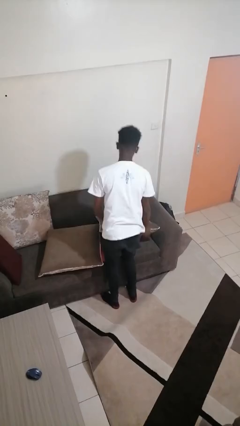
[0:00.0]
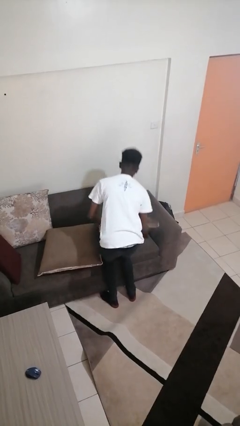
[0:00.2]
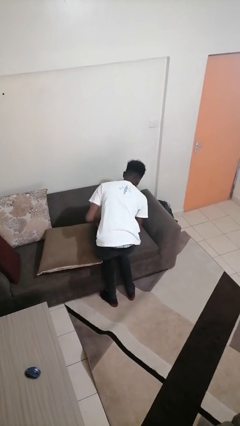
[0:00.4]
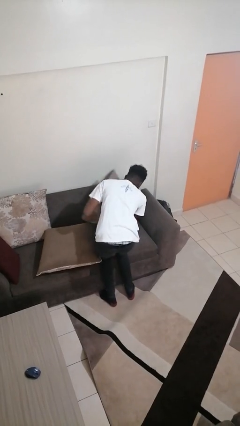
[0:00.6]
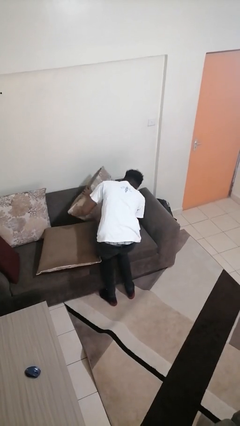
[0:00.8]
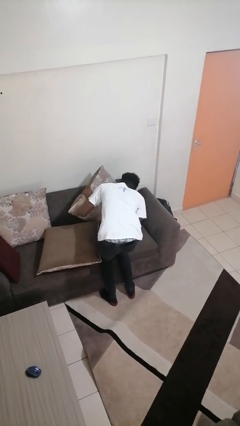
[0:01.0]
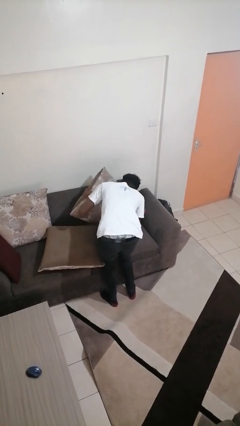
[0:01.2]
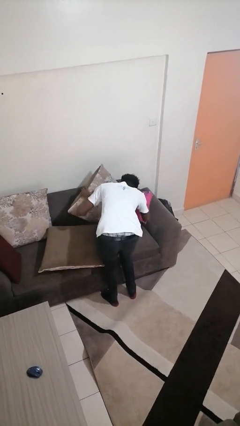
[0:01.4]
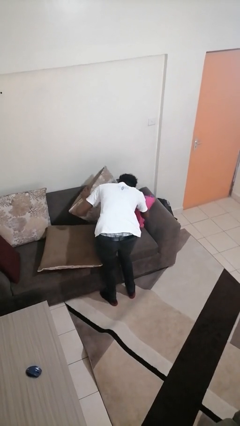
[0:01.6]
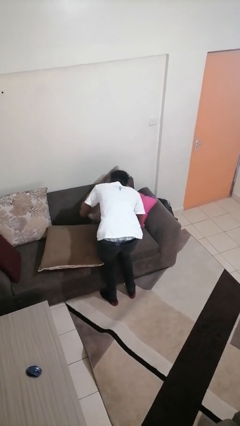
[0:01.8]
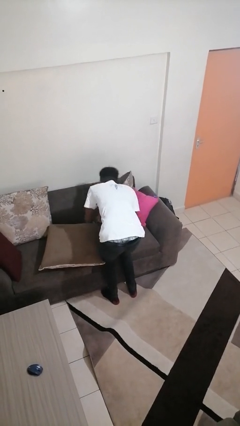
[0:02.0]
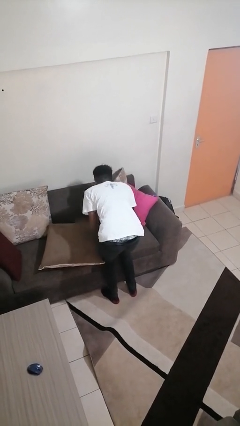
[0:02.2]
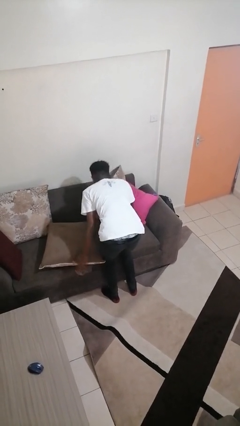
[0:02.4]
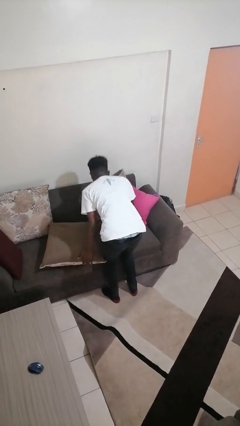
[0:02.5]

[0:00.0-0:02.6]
person searches in couch

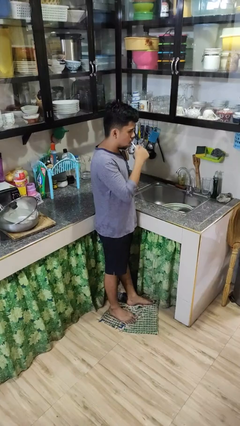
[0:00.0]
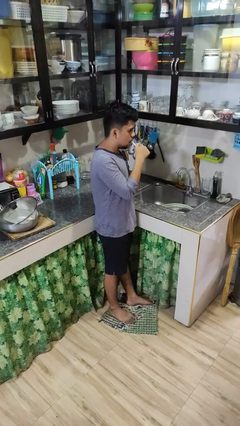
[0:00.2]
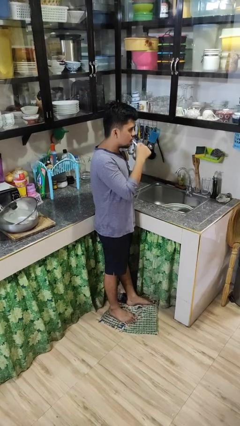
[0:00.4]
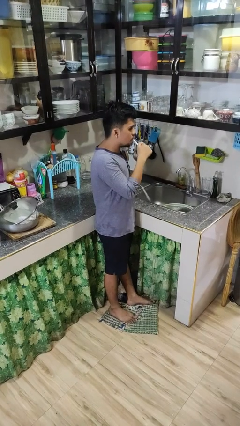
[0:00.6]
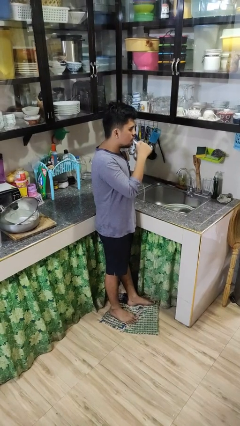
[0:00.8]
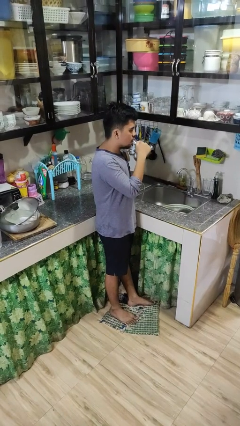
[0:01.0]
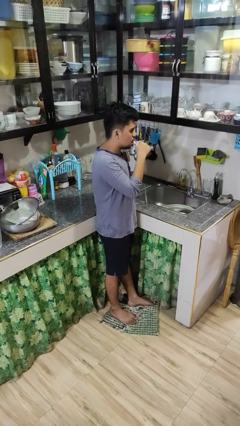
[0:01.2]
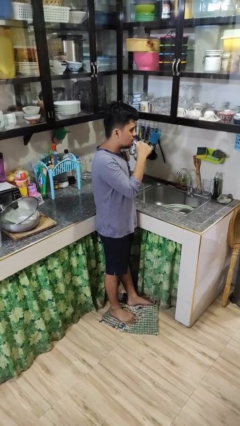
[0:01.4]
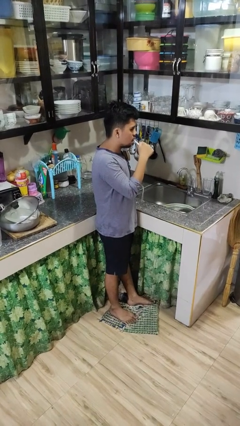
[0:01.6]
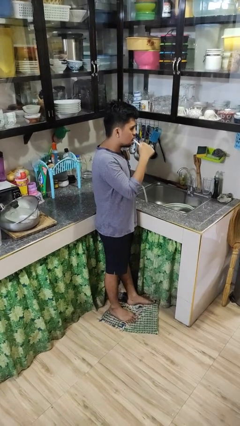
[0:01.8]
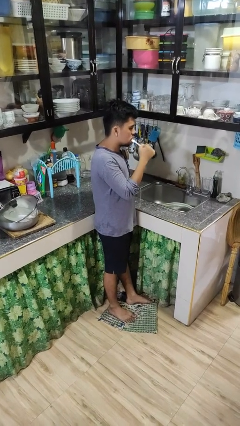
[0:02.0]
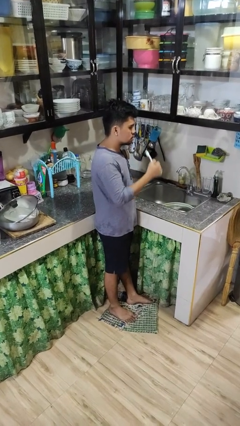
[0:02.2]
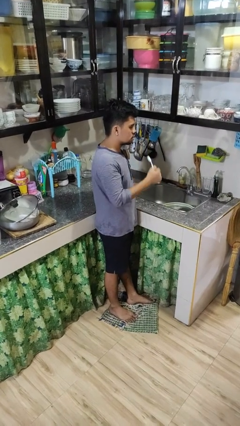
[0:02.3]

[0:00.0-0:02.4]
person brushes teeth

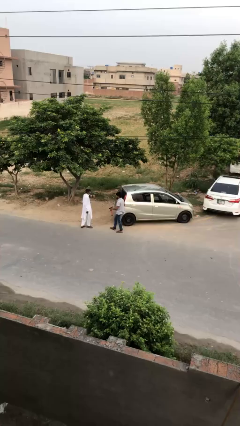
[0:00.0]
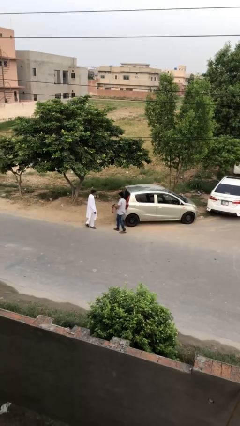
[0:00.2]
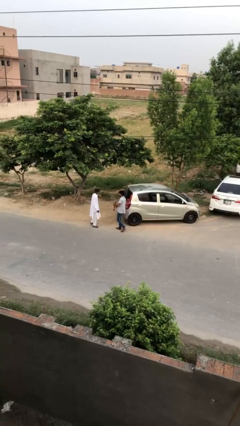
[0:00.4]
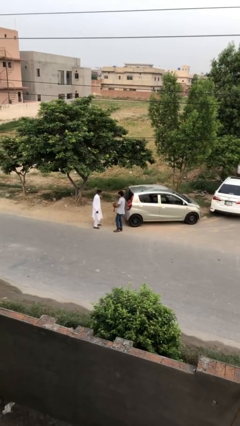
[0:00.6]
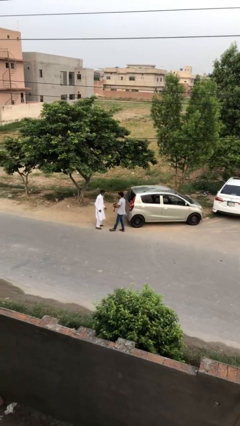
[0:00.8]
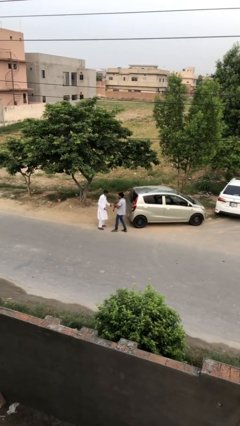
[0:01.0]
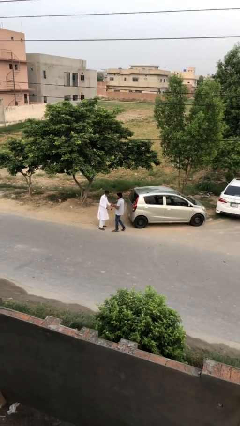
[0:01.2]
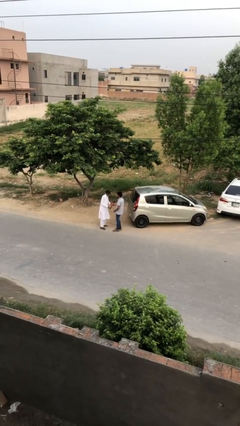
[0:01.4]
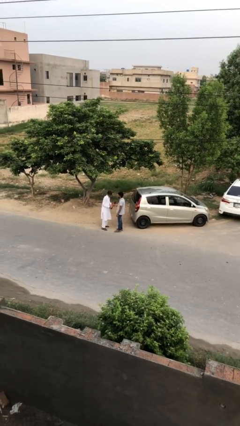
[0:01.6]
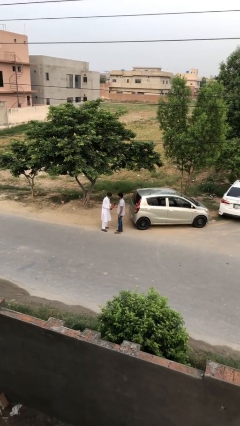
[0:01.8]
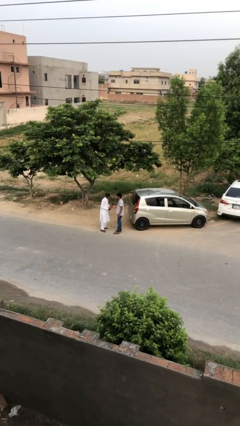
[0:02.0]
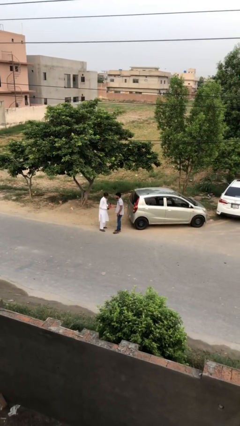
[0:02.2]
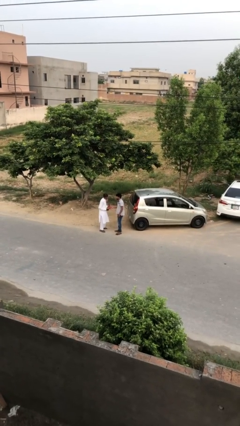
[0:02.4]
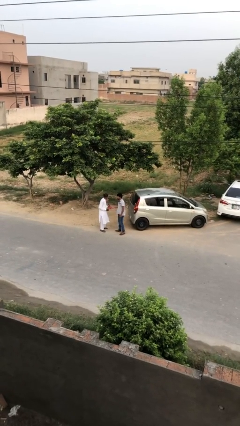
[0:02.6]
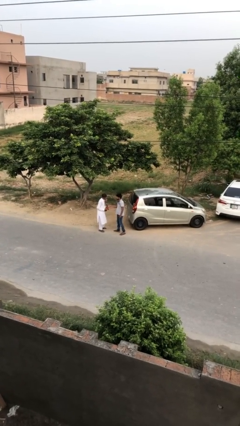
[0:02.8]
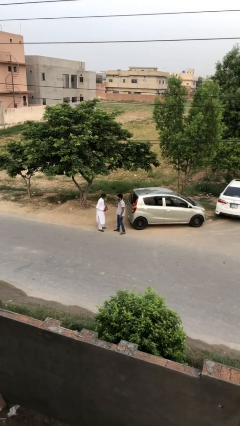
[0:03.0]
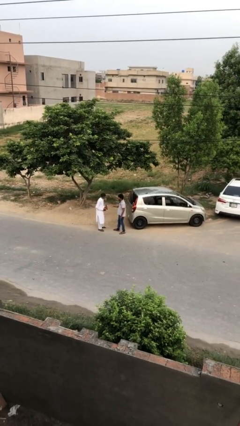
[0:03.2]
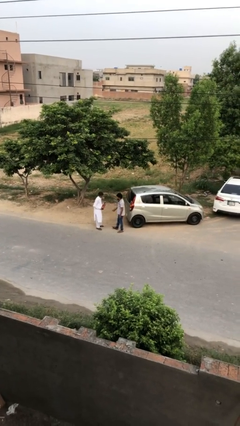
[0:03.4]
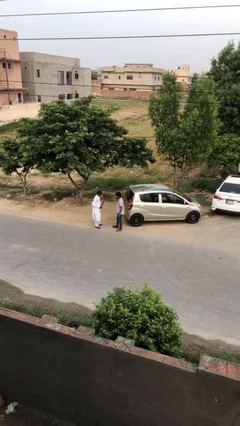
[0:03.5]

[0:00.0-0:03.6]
person transfers object to person

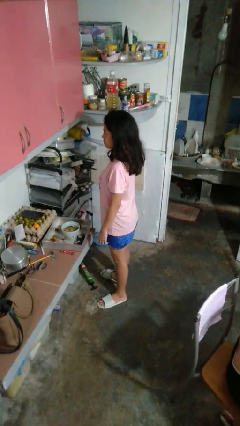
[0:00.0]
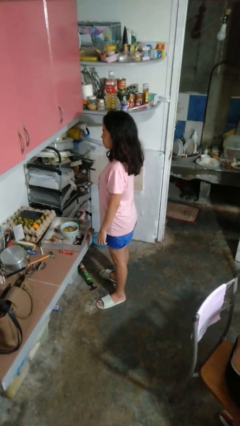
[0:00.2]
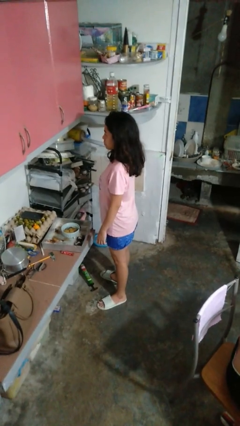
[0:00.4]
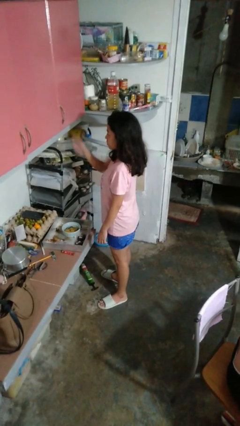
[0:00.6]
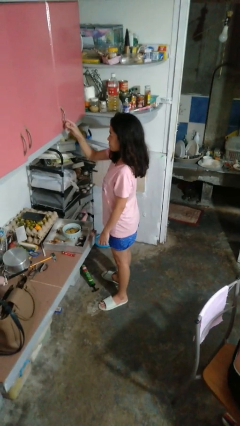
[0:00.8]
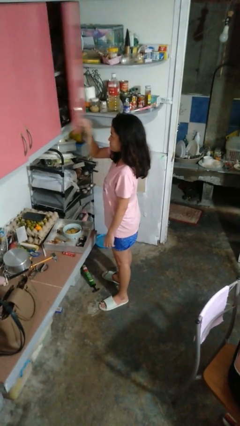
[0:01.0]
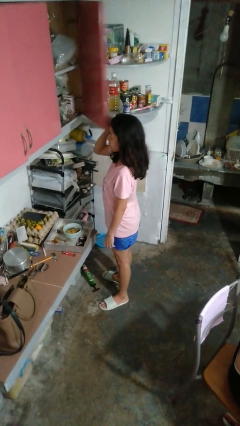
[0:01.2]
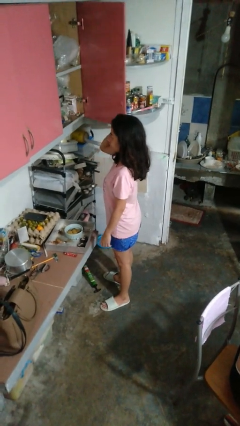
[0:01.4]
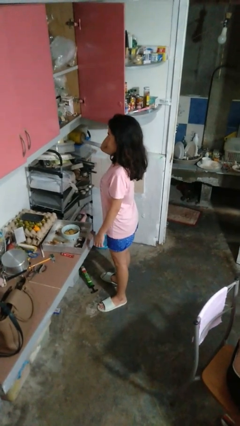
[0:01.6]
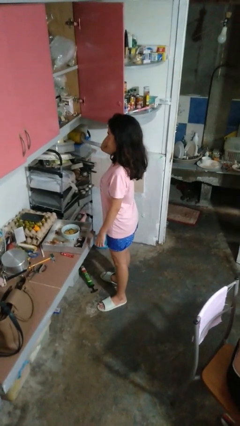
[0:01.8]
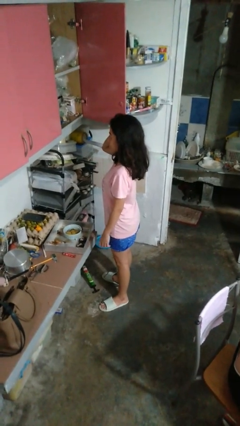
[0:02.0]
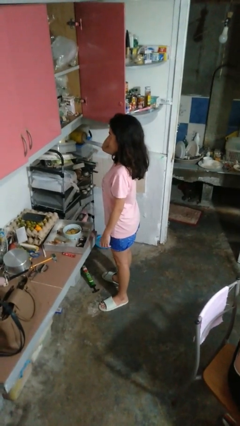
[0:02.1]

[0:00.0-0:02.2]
person opens cabinet

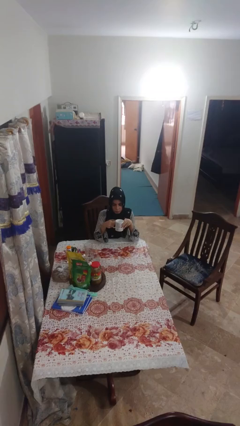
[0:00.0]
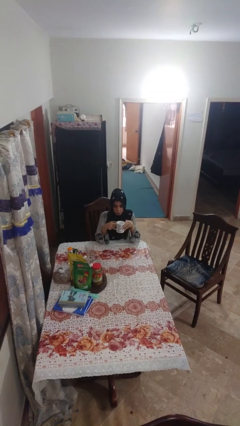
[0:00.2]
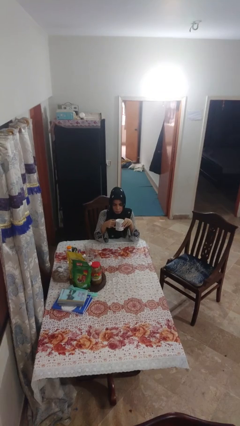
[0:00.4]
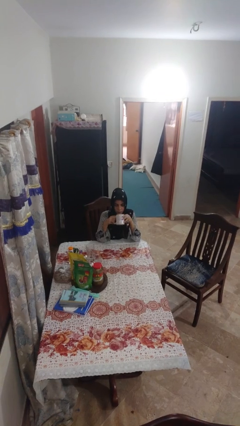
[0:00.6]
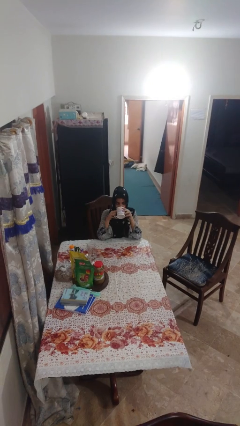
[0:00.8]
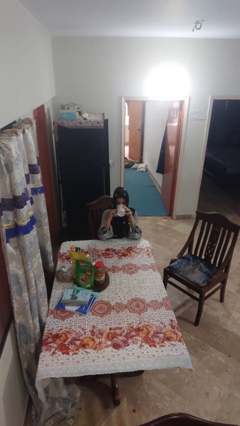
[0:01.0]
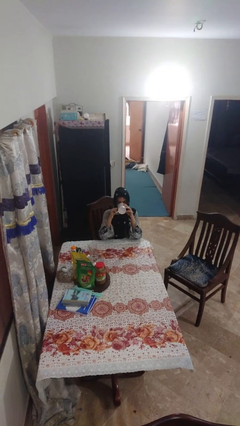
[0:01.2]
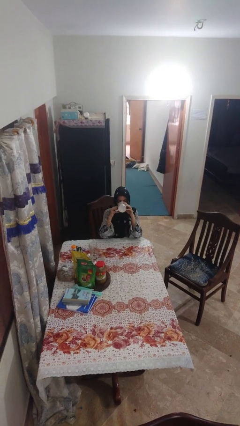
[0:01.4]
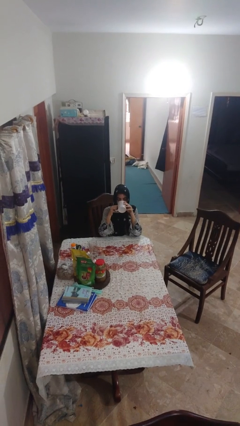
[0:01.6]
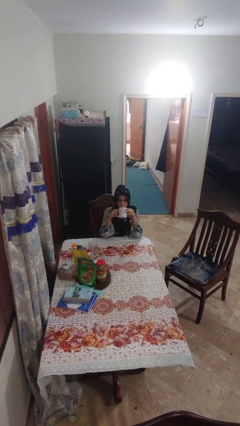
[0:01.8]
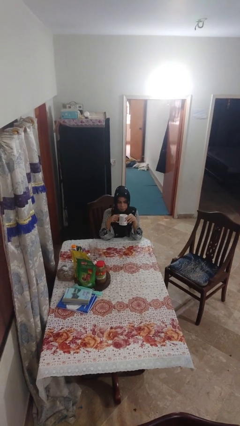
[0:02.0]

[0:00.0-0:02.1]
person drinks from mug

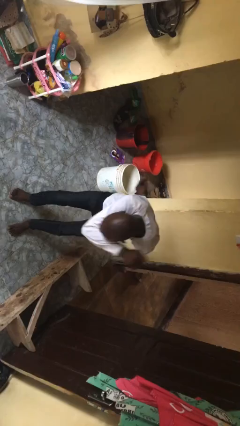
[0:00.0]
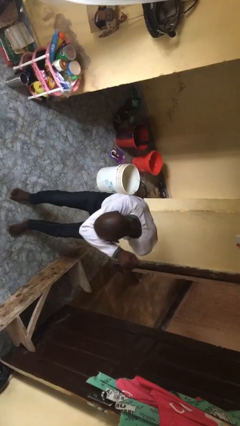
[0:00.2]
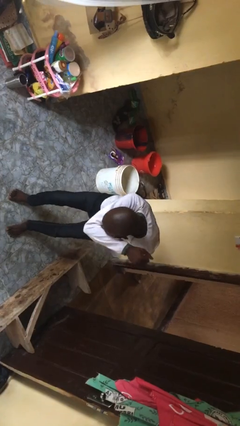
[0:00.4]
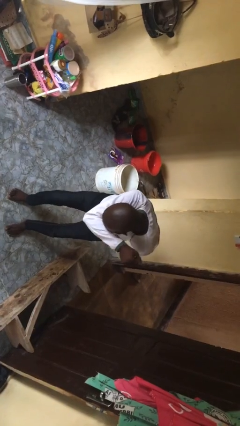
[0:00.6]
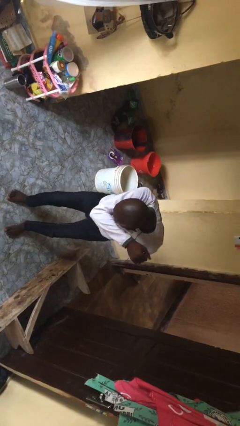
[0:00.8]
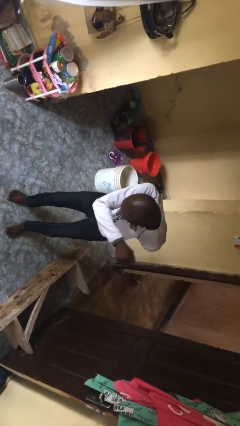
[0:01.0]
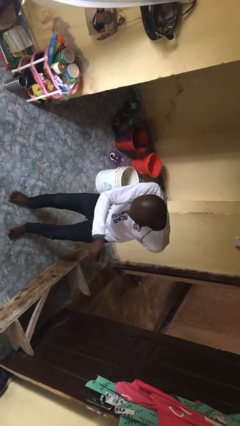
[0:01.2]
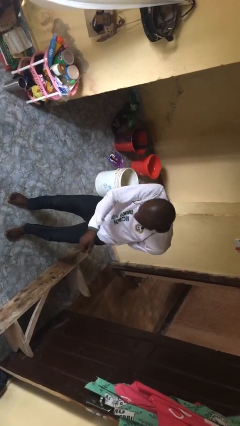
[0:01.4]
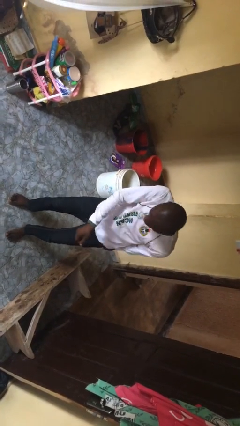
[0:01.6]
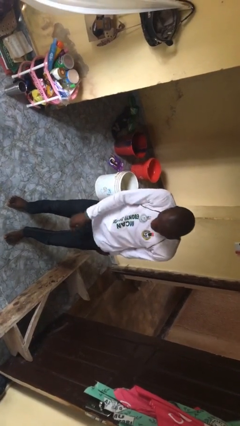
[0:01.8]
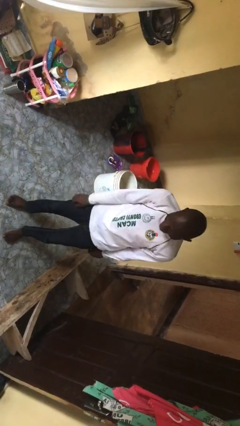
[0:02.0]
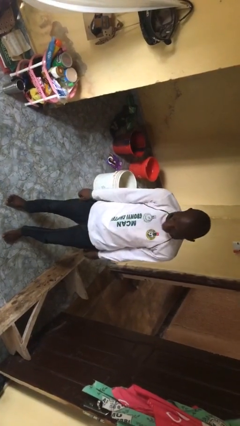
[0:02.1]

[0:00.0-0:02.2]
person sneezes into arm

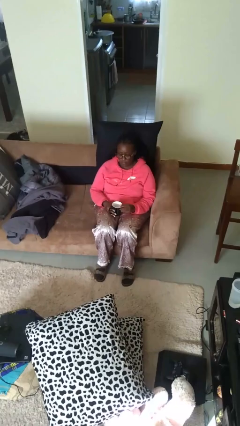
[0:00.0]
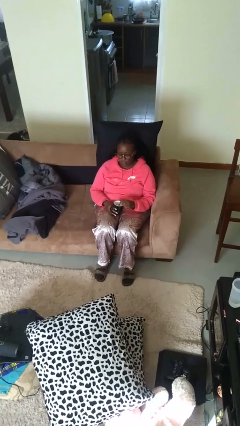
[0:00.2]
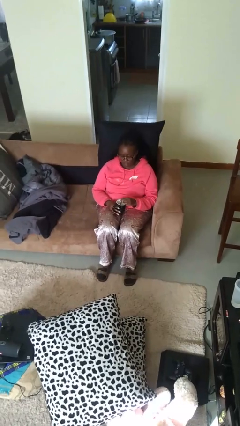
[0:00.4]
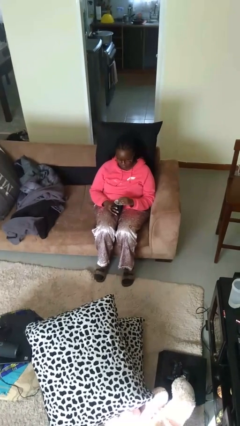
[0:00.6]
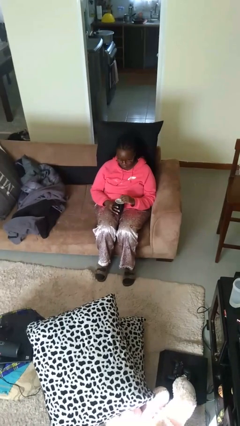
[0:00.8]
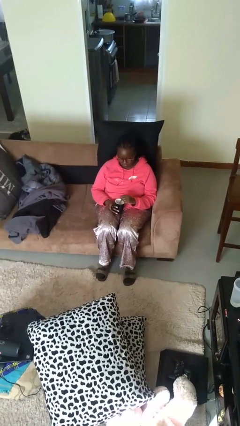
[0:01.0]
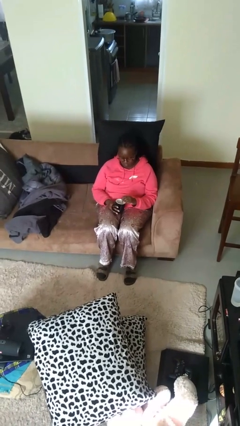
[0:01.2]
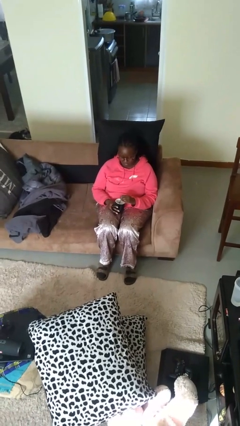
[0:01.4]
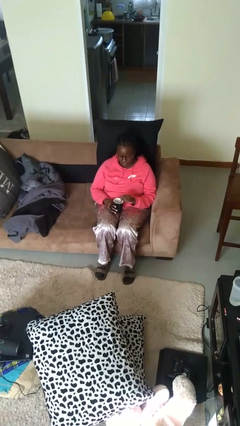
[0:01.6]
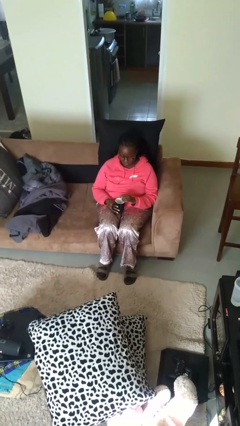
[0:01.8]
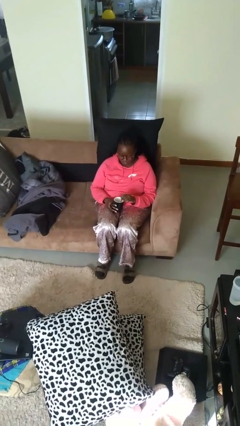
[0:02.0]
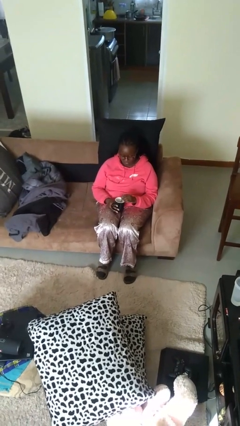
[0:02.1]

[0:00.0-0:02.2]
person stirs mug
